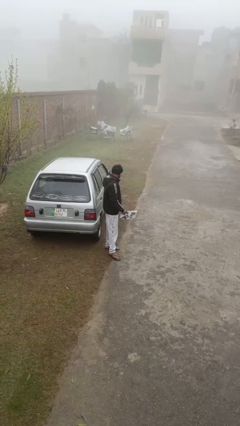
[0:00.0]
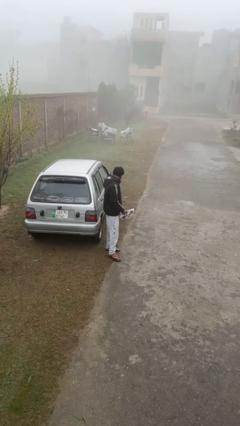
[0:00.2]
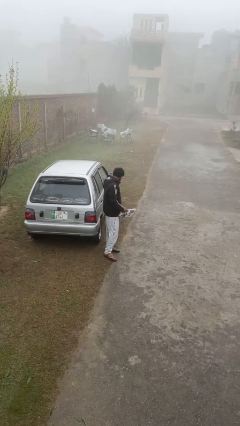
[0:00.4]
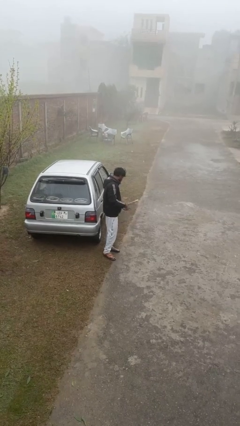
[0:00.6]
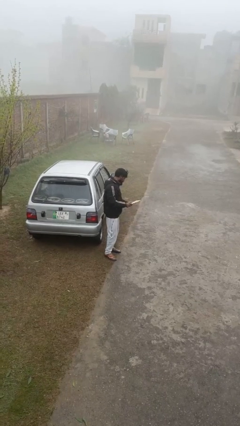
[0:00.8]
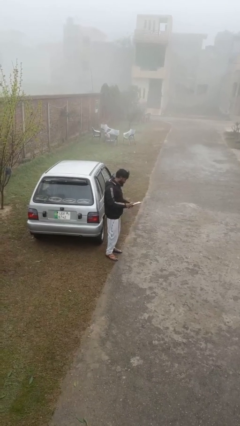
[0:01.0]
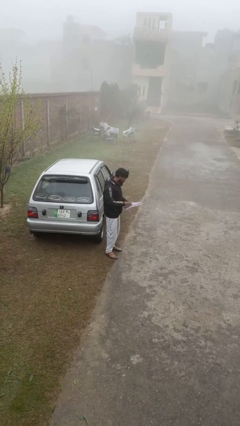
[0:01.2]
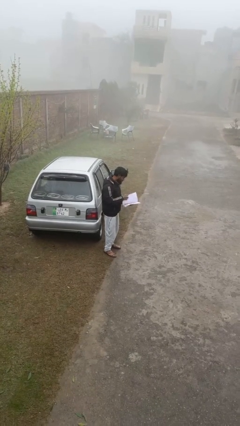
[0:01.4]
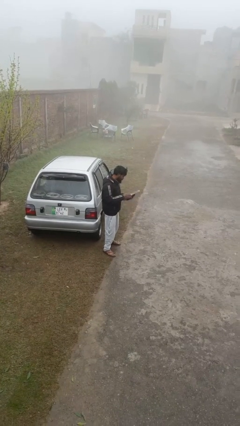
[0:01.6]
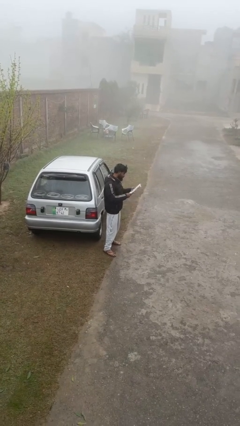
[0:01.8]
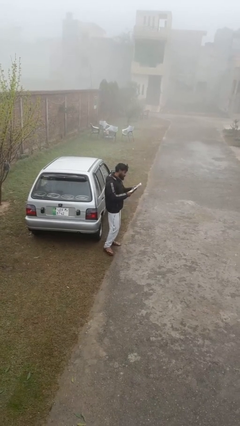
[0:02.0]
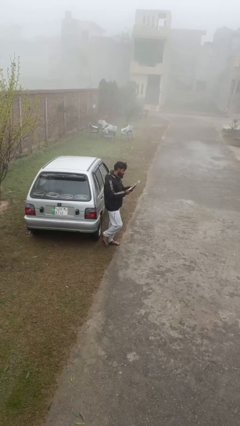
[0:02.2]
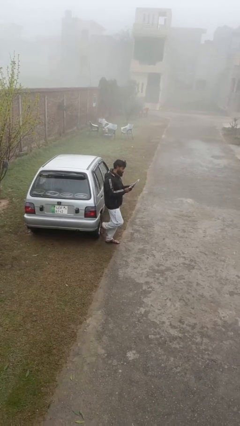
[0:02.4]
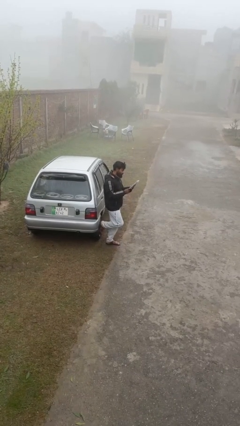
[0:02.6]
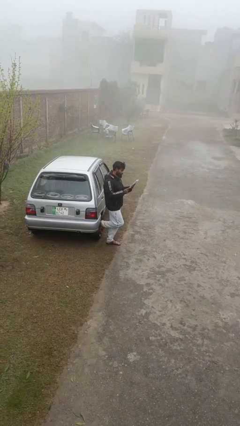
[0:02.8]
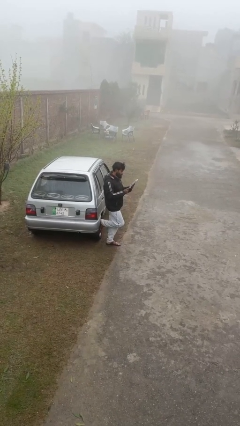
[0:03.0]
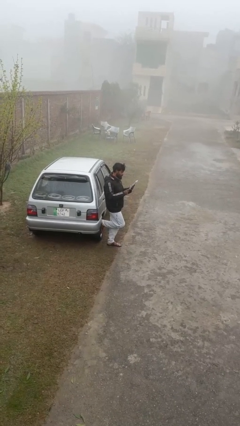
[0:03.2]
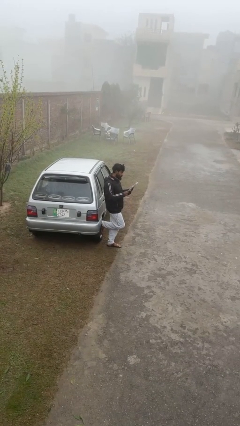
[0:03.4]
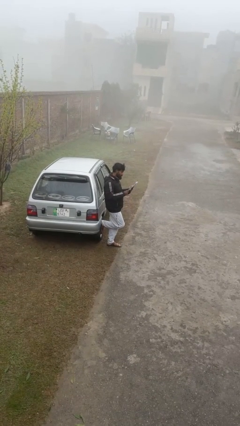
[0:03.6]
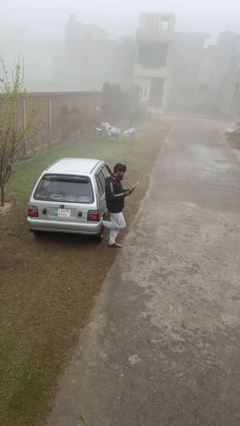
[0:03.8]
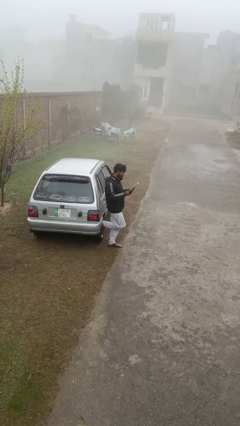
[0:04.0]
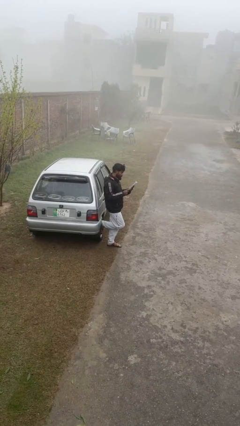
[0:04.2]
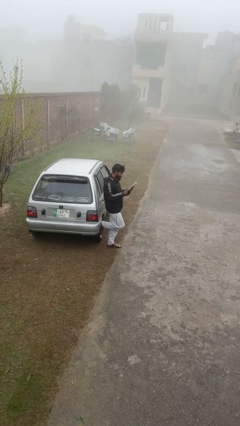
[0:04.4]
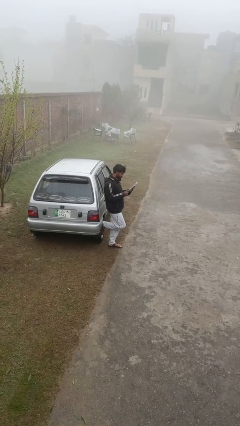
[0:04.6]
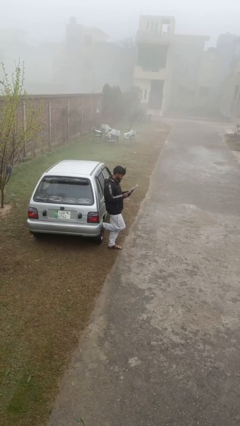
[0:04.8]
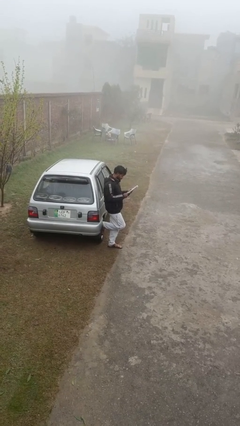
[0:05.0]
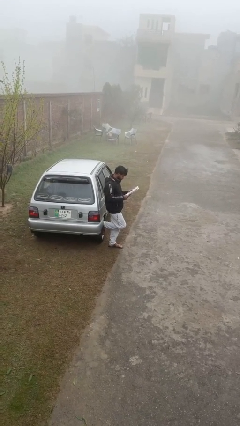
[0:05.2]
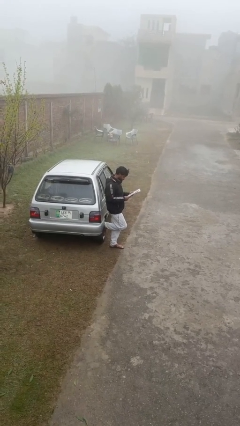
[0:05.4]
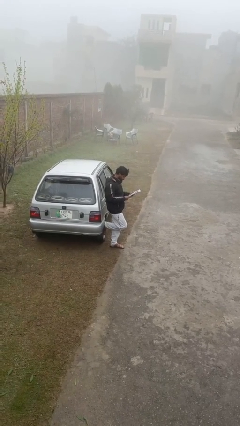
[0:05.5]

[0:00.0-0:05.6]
person reads document

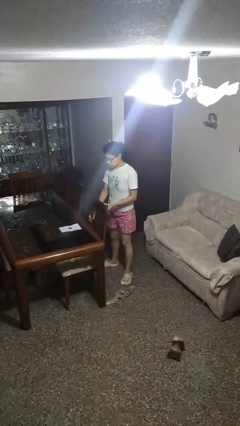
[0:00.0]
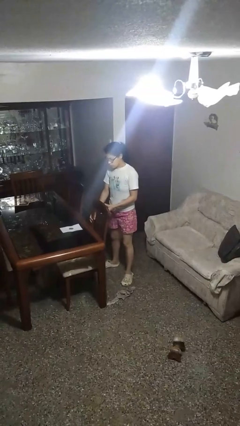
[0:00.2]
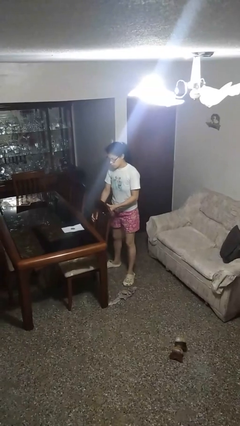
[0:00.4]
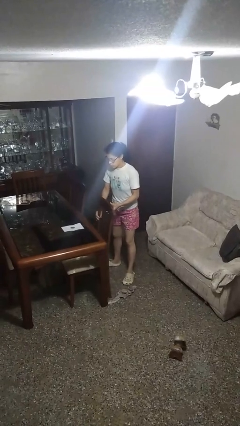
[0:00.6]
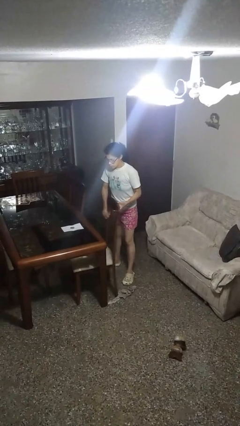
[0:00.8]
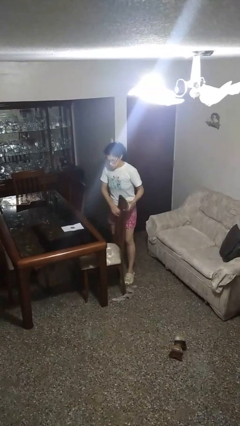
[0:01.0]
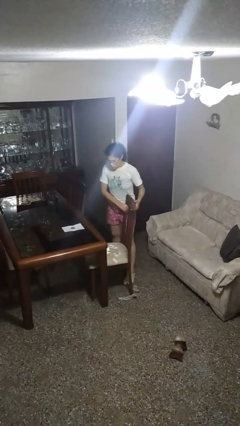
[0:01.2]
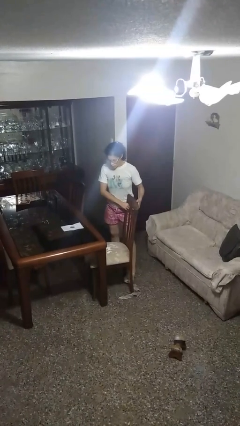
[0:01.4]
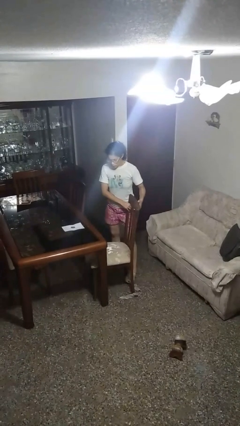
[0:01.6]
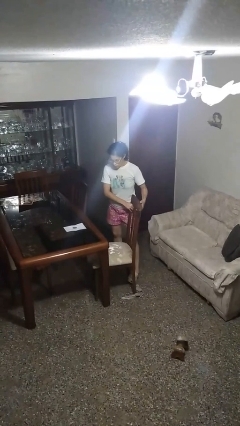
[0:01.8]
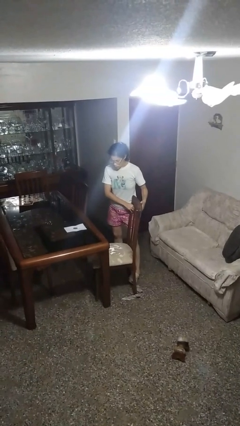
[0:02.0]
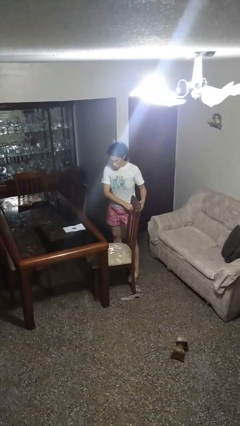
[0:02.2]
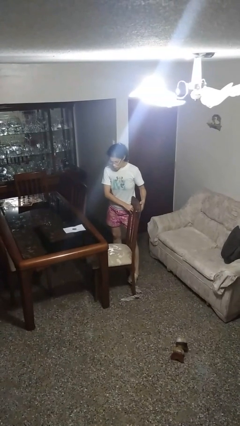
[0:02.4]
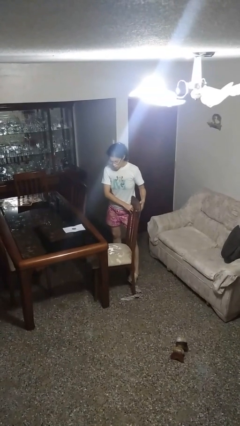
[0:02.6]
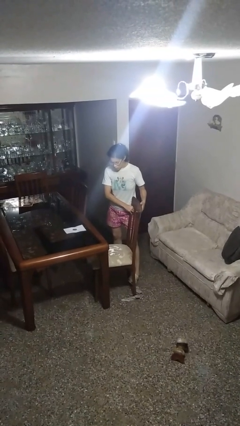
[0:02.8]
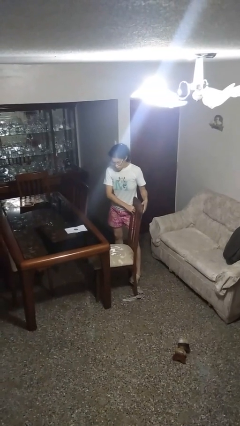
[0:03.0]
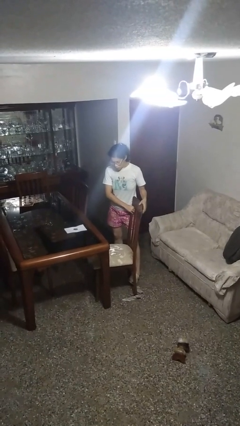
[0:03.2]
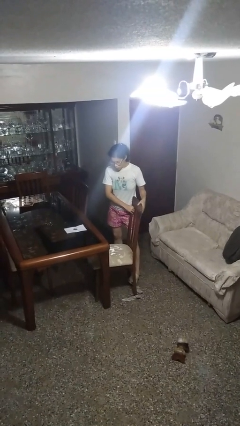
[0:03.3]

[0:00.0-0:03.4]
person pulls out chair

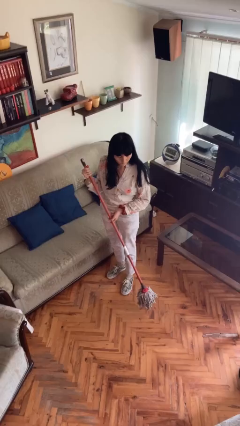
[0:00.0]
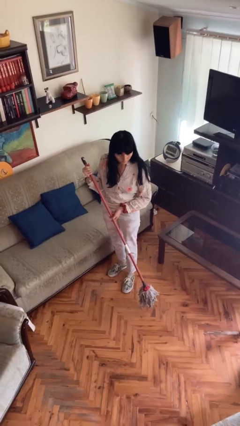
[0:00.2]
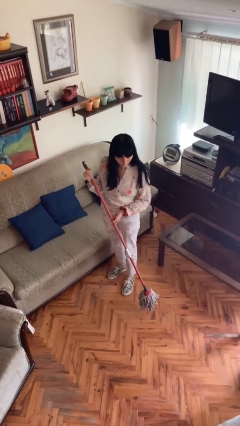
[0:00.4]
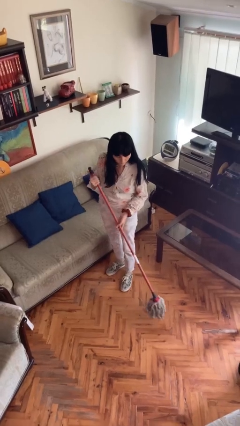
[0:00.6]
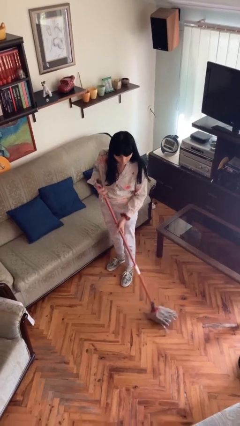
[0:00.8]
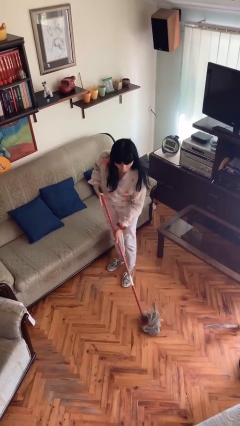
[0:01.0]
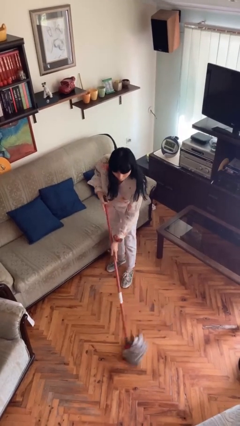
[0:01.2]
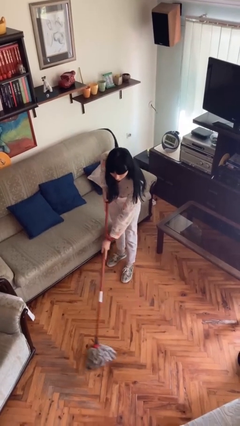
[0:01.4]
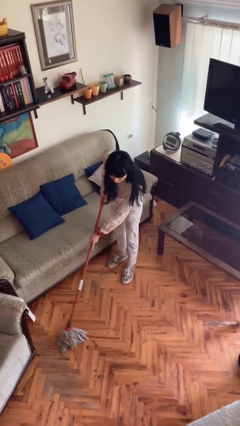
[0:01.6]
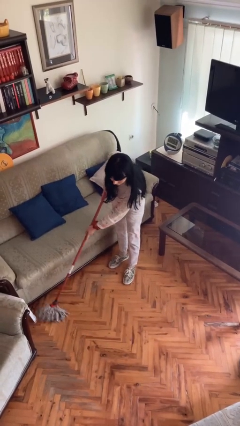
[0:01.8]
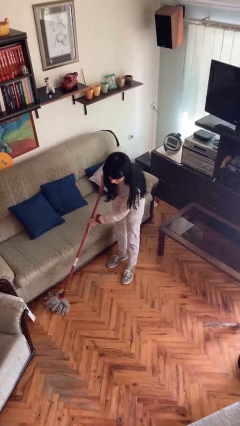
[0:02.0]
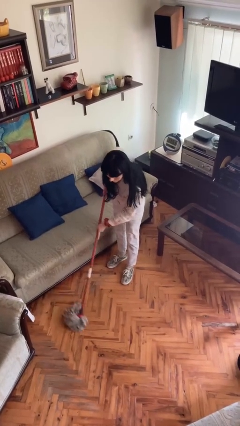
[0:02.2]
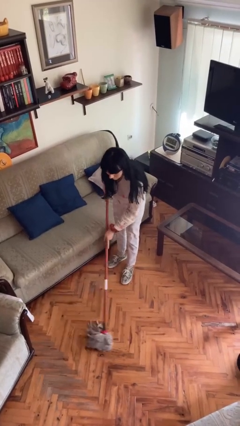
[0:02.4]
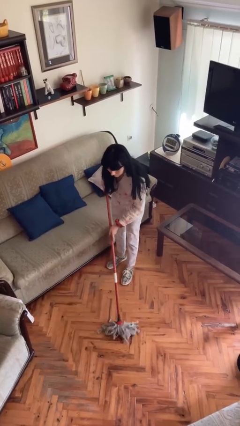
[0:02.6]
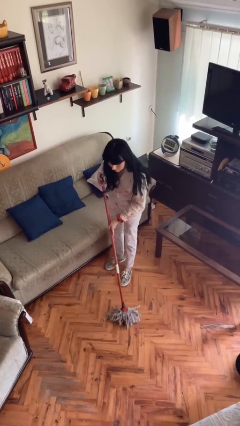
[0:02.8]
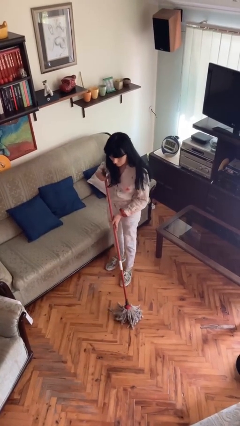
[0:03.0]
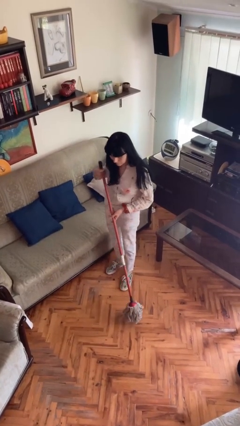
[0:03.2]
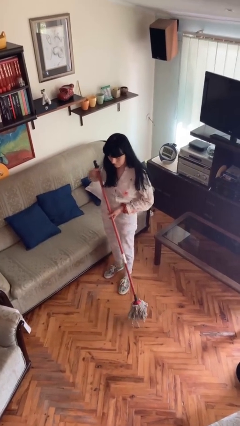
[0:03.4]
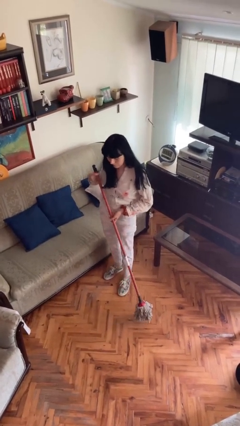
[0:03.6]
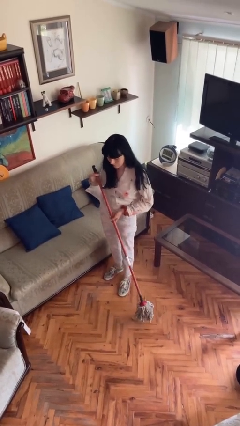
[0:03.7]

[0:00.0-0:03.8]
person sweeps floor

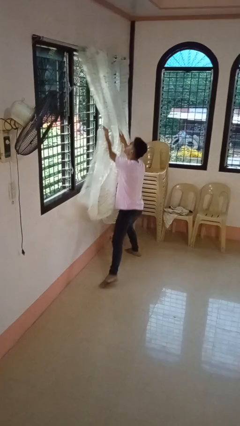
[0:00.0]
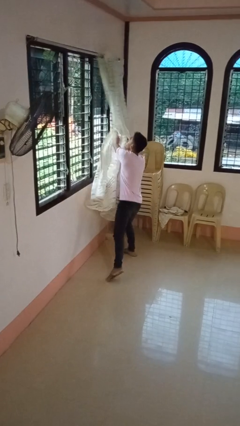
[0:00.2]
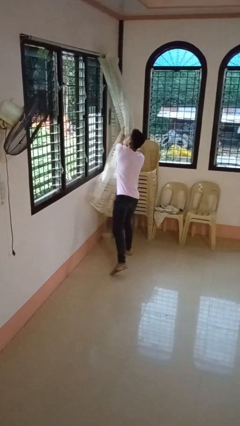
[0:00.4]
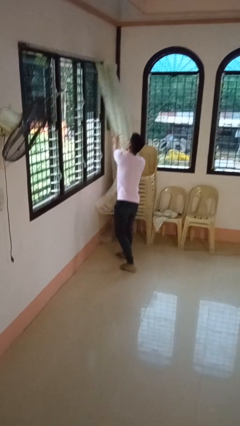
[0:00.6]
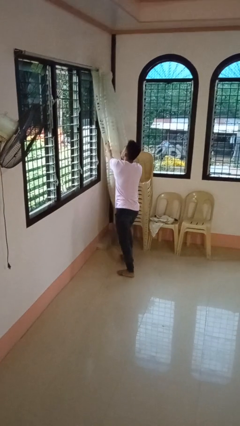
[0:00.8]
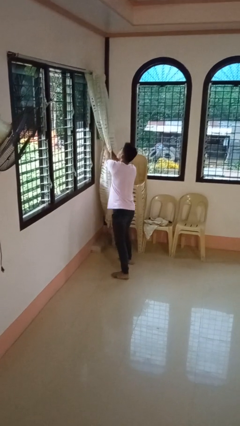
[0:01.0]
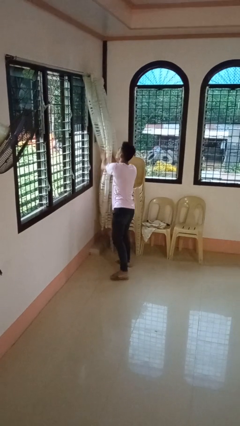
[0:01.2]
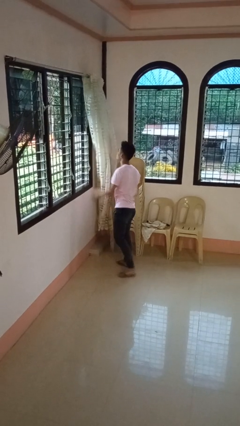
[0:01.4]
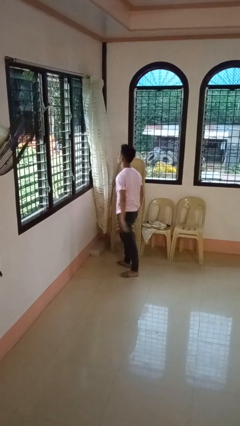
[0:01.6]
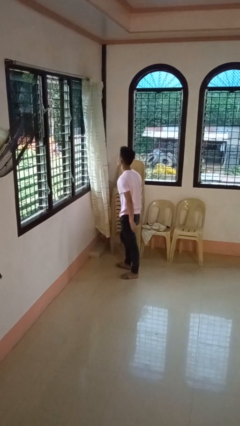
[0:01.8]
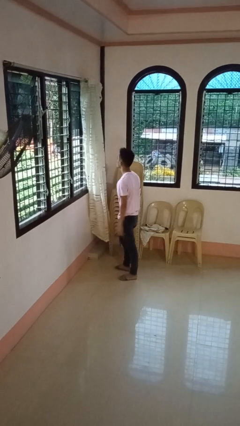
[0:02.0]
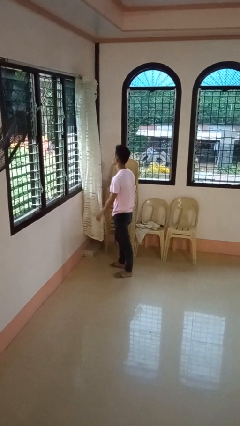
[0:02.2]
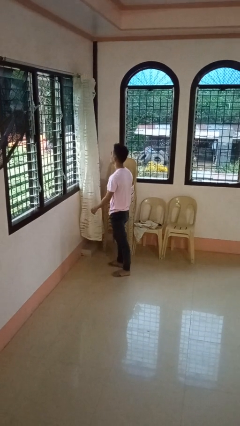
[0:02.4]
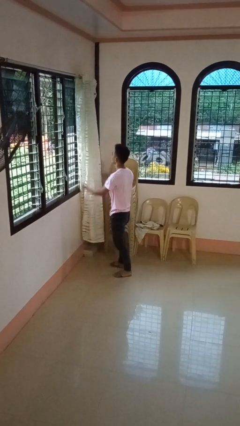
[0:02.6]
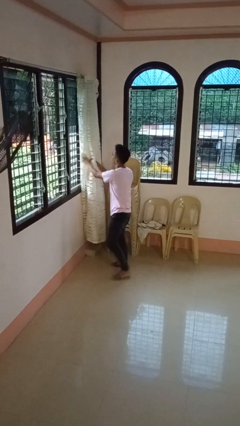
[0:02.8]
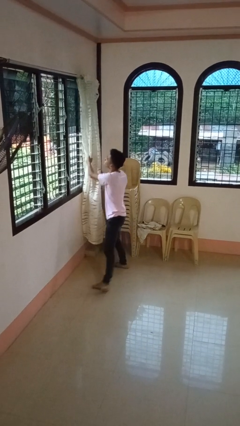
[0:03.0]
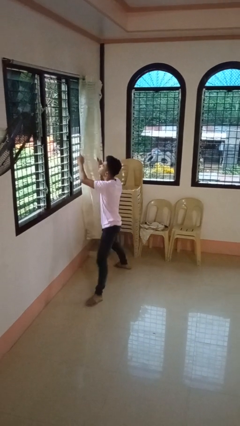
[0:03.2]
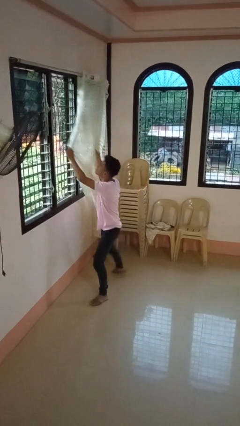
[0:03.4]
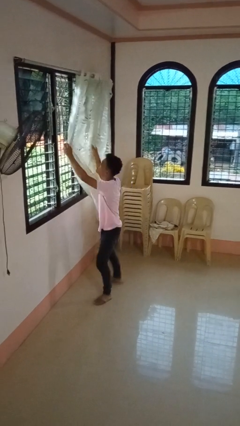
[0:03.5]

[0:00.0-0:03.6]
person opens curtains

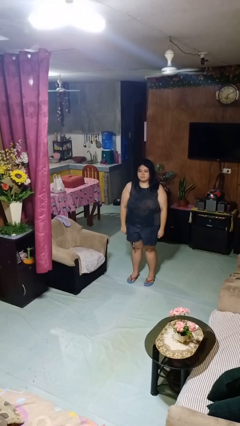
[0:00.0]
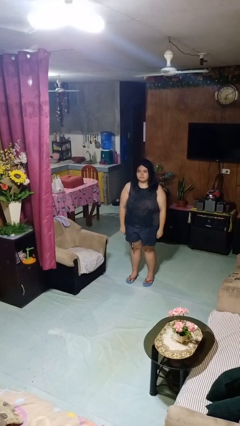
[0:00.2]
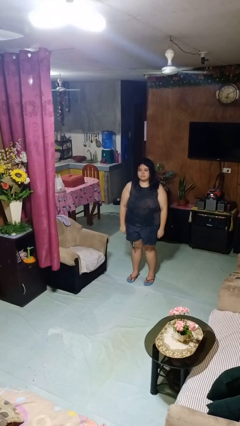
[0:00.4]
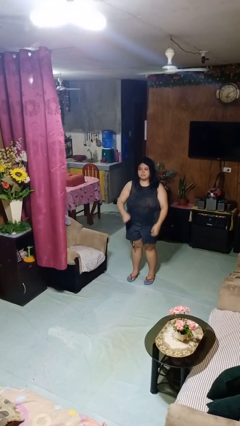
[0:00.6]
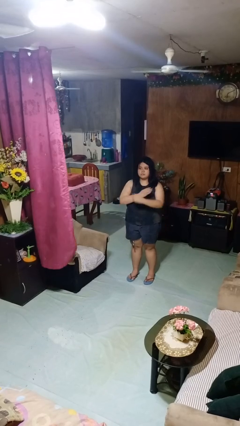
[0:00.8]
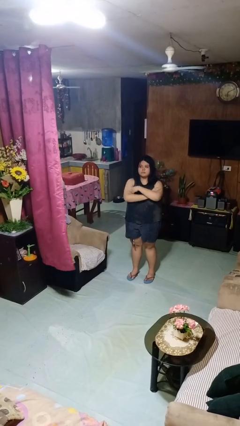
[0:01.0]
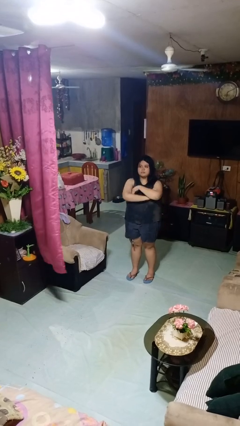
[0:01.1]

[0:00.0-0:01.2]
person crosses arms
